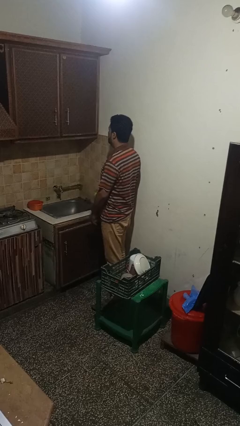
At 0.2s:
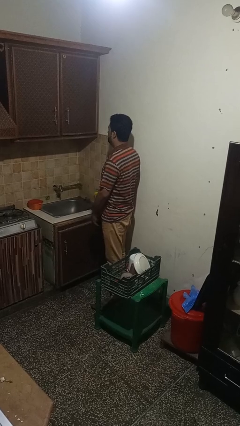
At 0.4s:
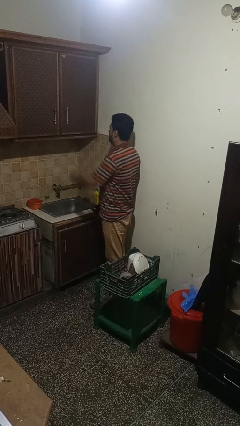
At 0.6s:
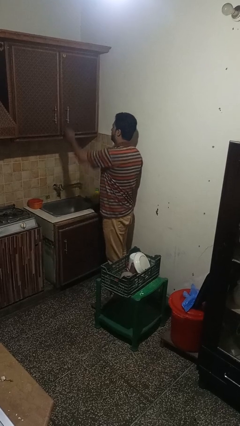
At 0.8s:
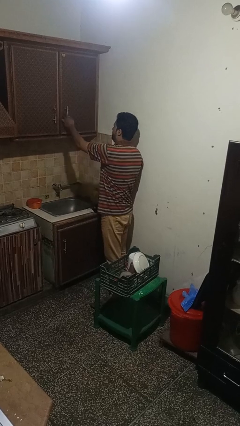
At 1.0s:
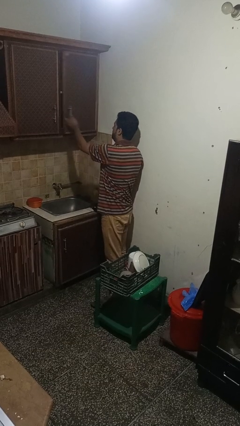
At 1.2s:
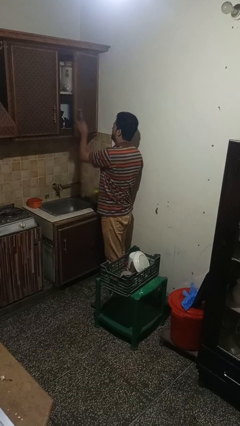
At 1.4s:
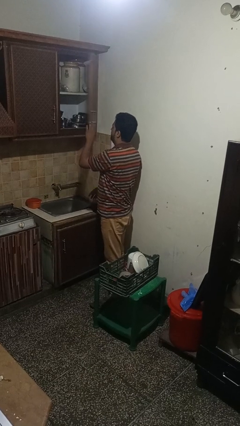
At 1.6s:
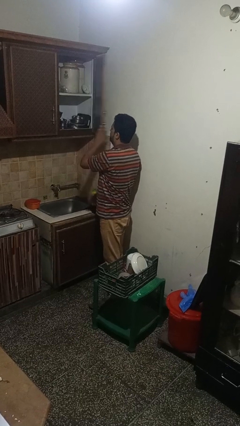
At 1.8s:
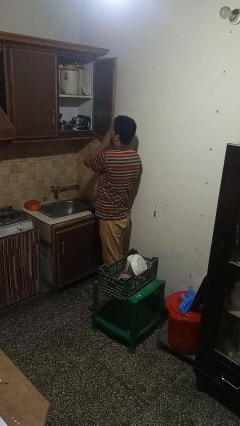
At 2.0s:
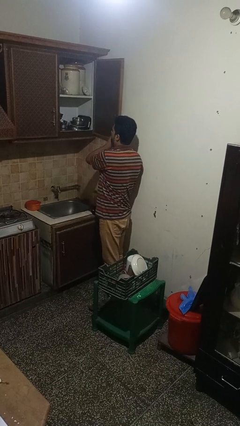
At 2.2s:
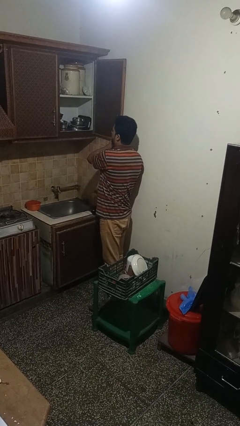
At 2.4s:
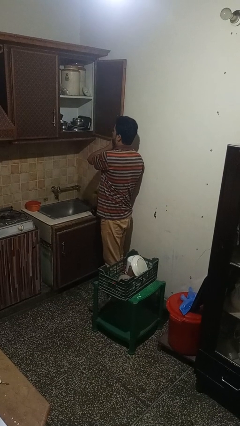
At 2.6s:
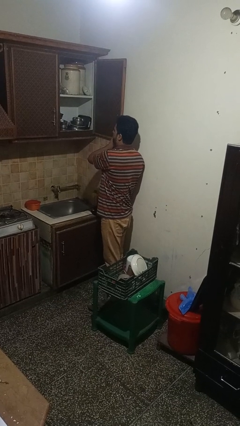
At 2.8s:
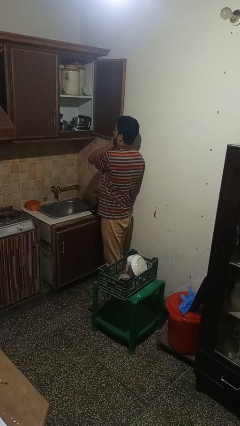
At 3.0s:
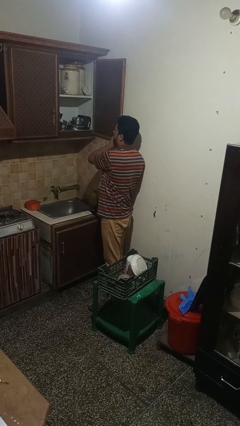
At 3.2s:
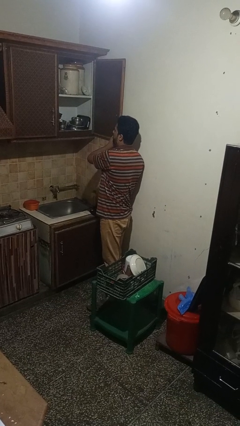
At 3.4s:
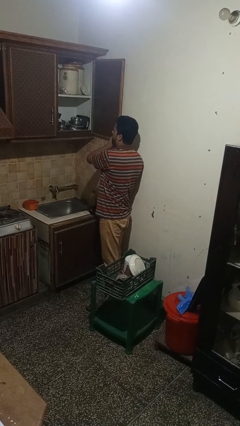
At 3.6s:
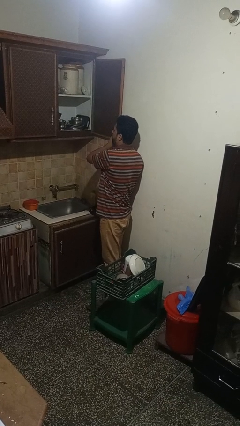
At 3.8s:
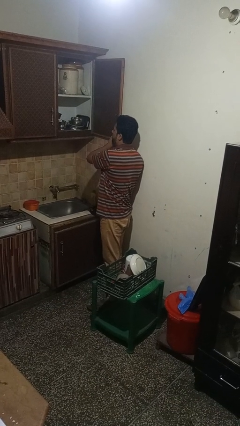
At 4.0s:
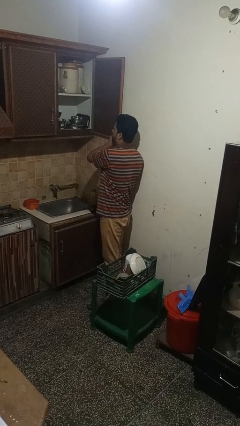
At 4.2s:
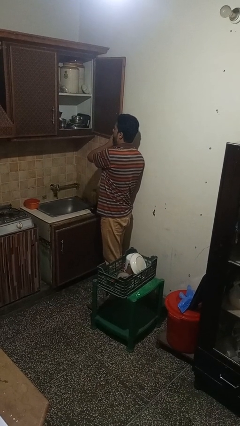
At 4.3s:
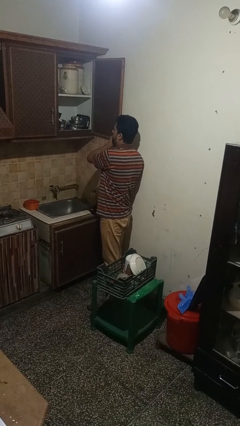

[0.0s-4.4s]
person opens cabinet

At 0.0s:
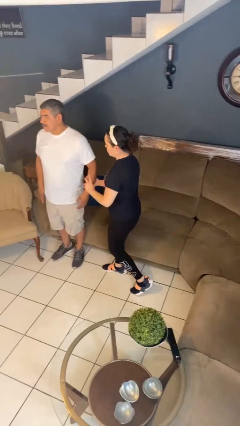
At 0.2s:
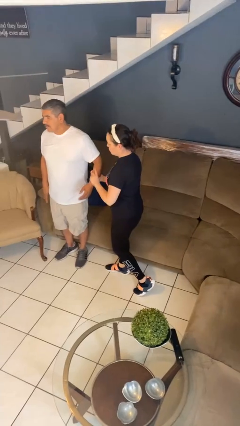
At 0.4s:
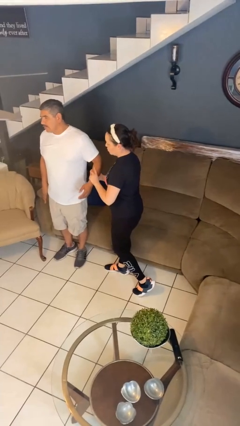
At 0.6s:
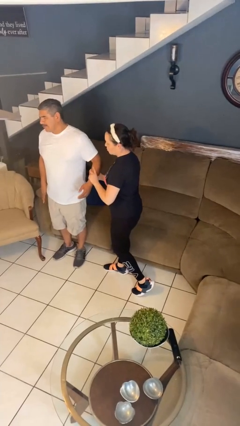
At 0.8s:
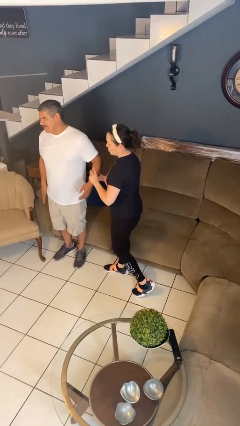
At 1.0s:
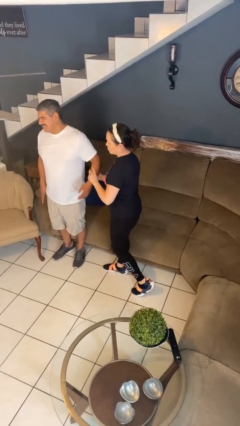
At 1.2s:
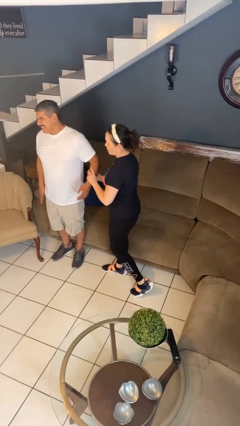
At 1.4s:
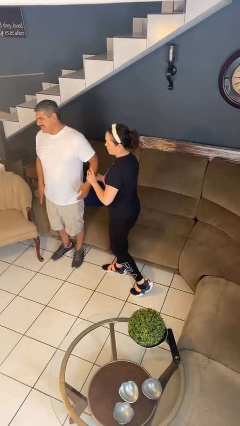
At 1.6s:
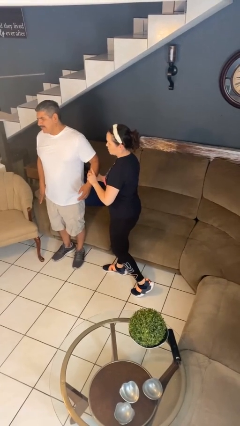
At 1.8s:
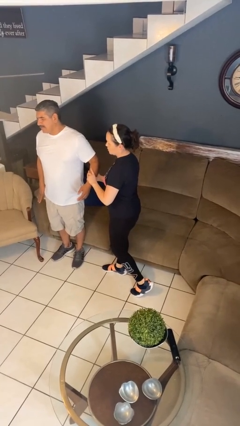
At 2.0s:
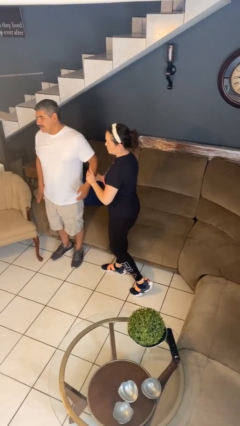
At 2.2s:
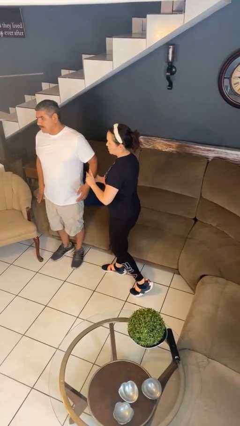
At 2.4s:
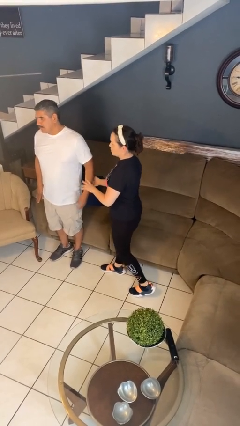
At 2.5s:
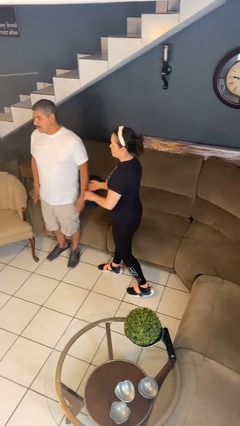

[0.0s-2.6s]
person grabs person by forearm

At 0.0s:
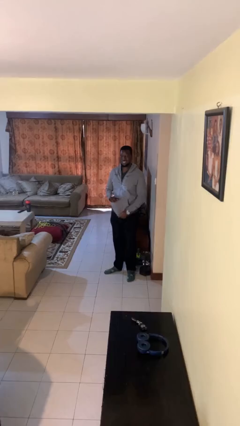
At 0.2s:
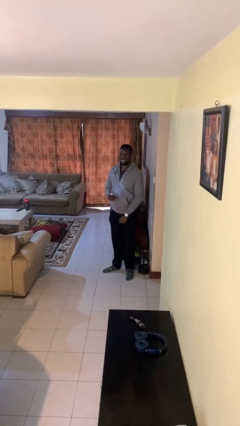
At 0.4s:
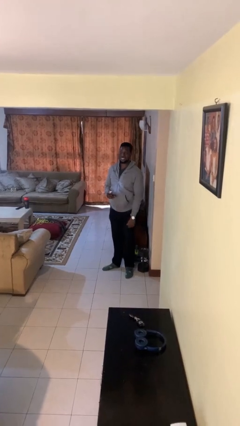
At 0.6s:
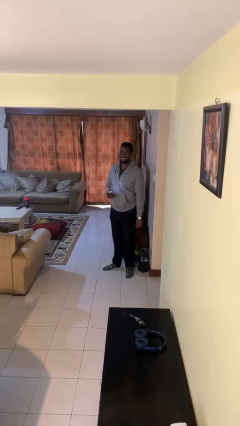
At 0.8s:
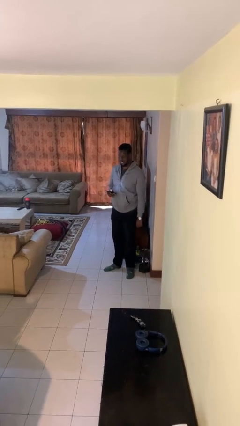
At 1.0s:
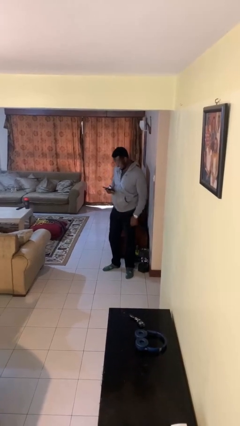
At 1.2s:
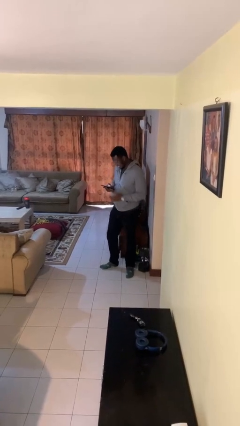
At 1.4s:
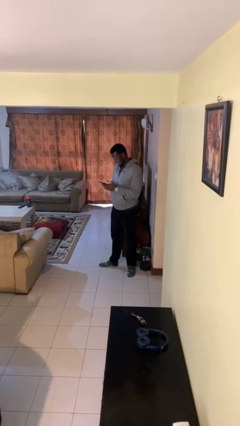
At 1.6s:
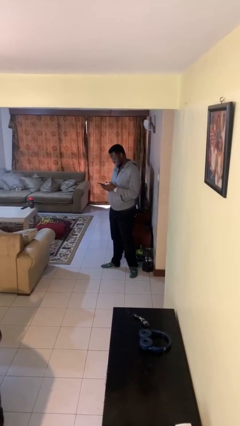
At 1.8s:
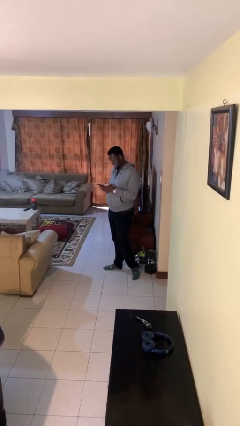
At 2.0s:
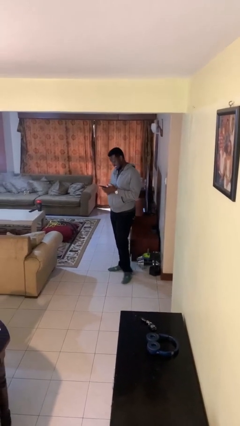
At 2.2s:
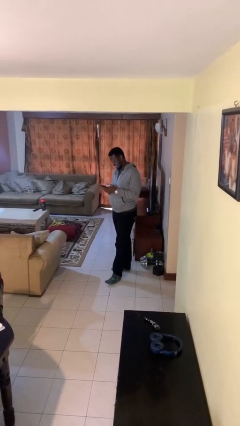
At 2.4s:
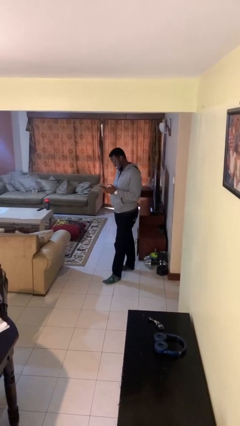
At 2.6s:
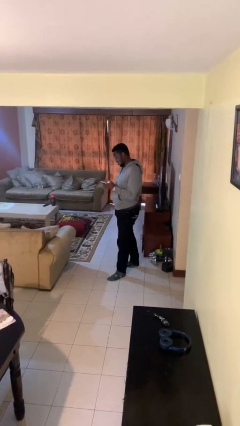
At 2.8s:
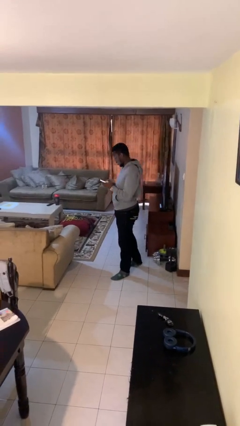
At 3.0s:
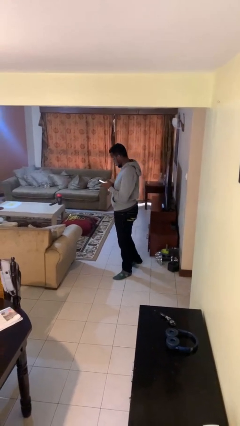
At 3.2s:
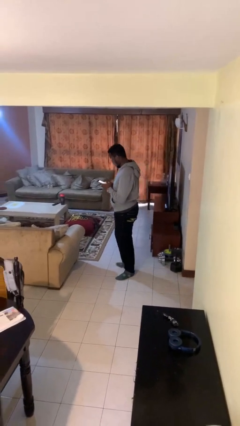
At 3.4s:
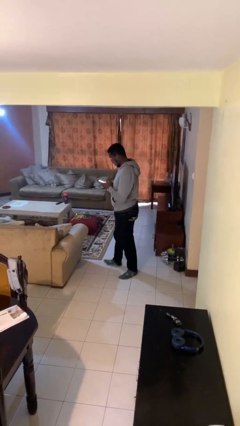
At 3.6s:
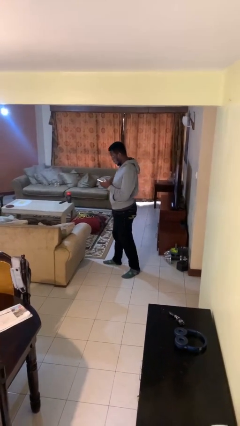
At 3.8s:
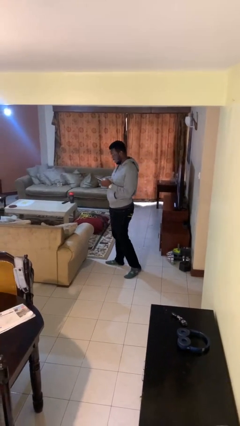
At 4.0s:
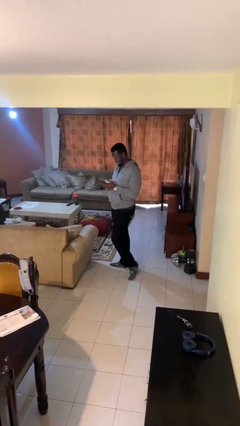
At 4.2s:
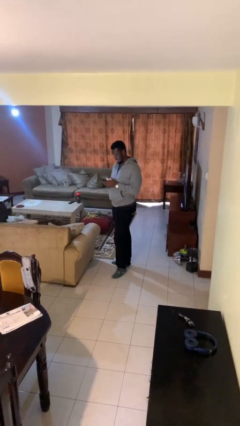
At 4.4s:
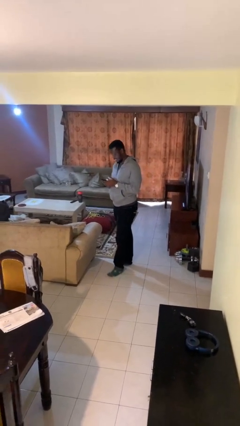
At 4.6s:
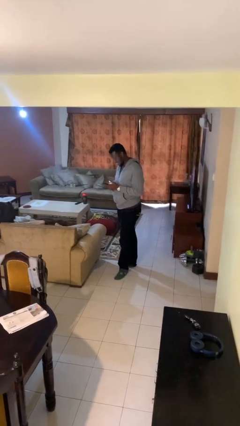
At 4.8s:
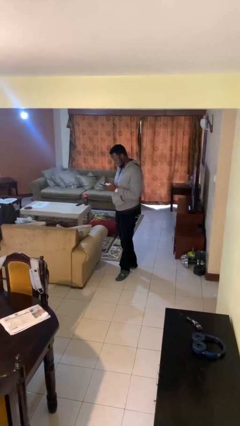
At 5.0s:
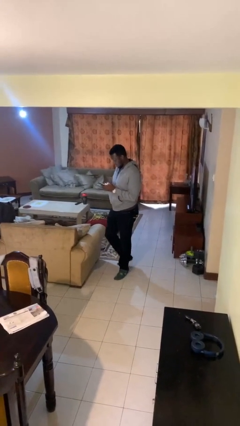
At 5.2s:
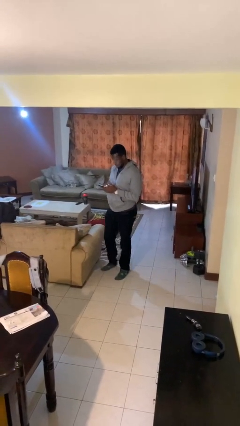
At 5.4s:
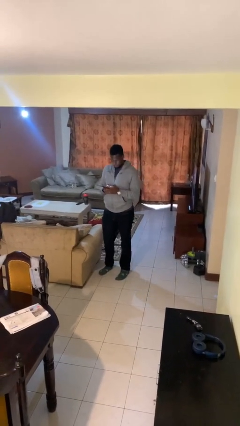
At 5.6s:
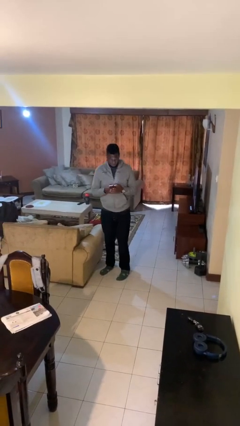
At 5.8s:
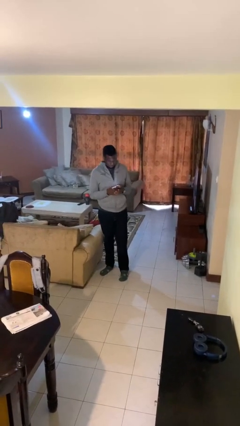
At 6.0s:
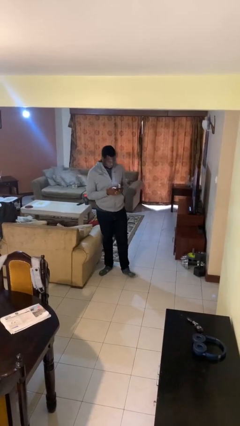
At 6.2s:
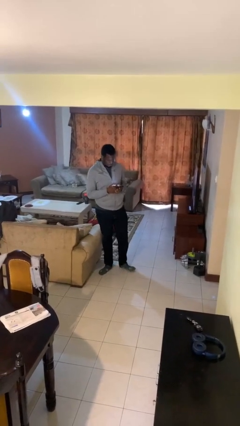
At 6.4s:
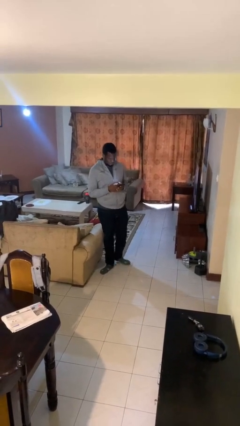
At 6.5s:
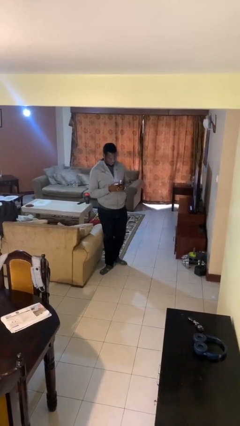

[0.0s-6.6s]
person texts on phone

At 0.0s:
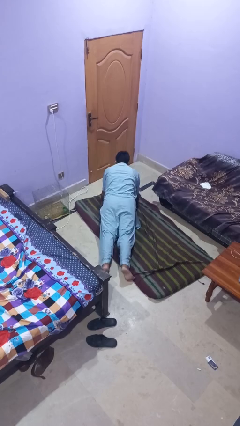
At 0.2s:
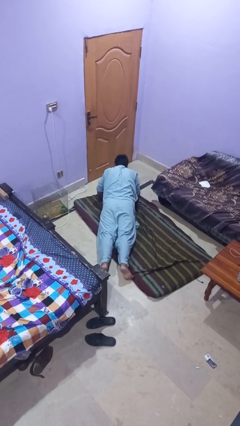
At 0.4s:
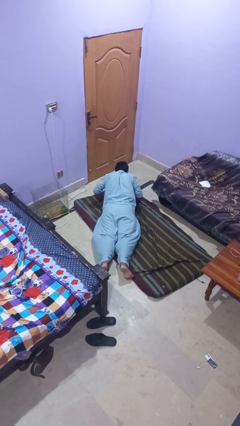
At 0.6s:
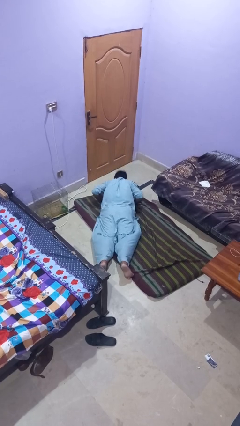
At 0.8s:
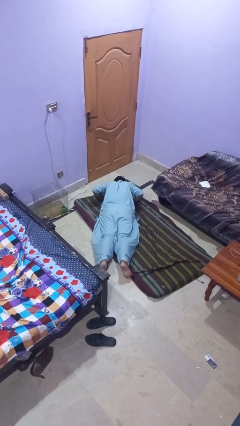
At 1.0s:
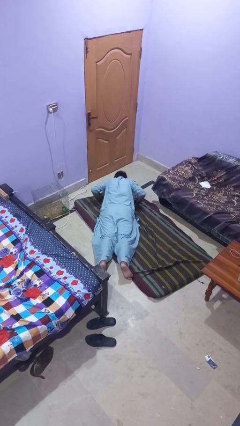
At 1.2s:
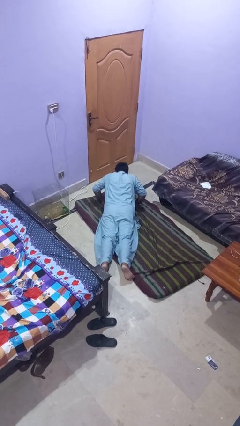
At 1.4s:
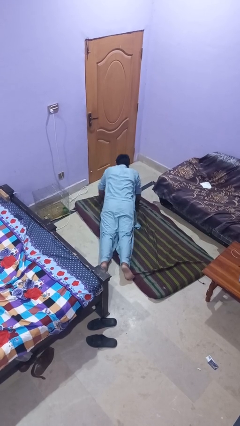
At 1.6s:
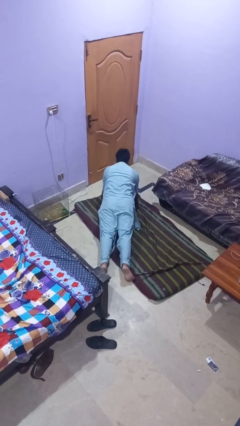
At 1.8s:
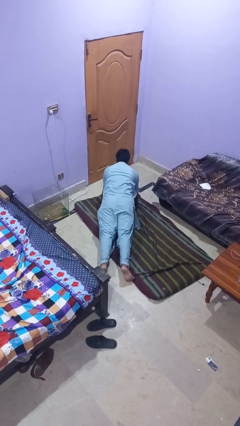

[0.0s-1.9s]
person exercises with pushup

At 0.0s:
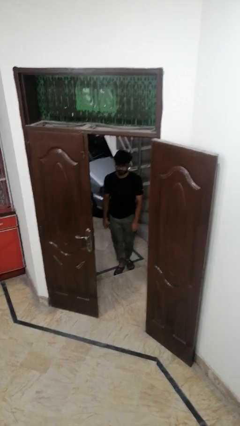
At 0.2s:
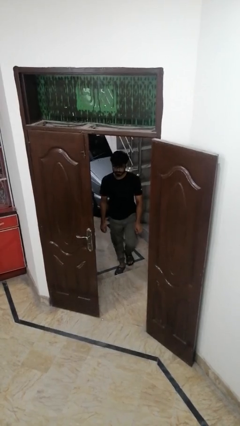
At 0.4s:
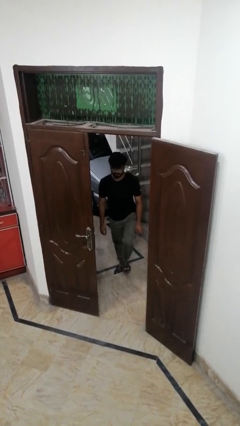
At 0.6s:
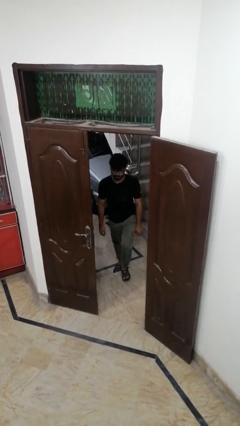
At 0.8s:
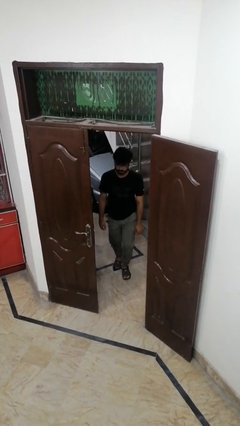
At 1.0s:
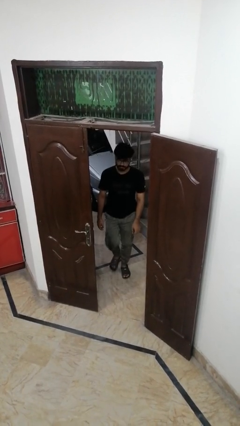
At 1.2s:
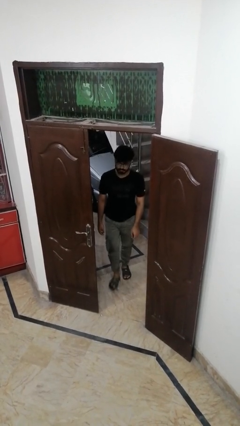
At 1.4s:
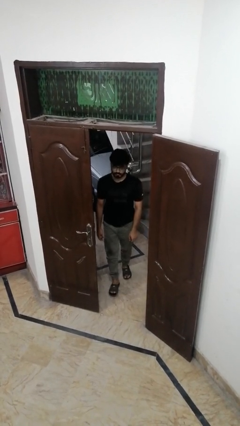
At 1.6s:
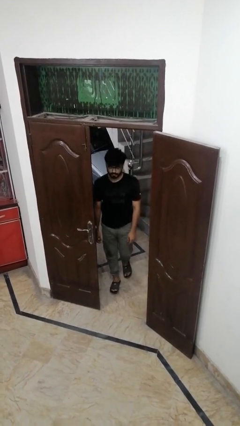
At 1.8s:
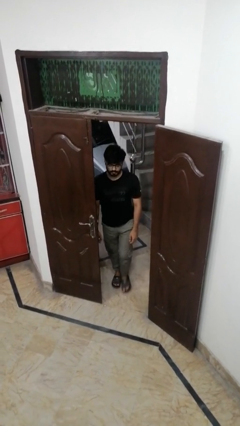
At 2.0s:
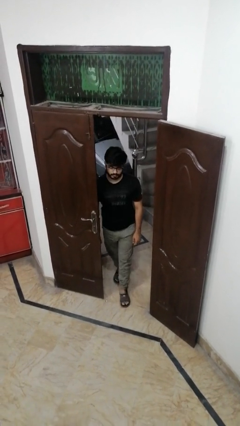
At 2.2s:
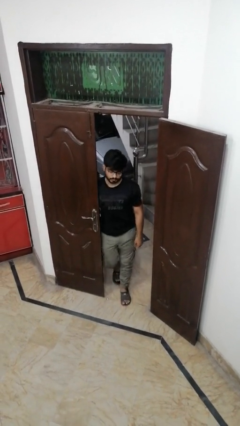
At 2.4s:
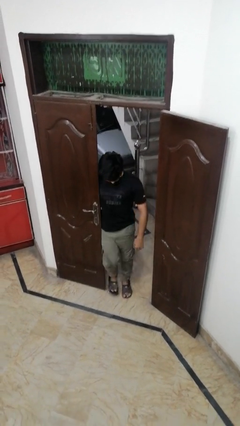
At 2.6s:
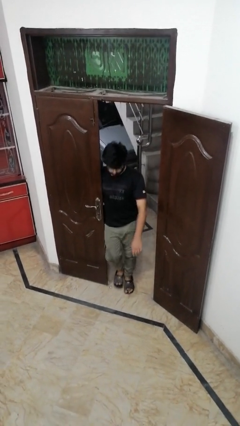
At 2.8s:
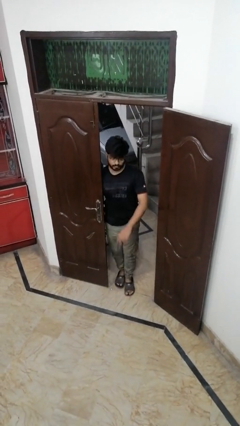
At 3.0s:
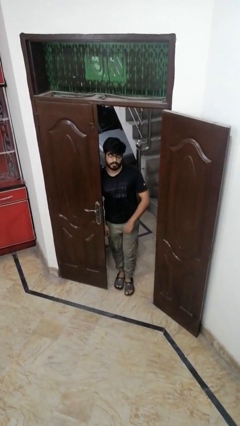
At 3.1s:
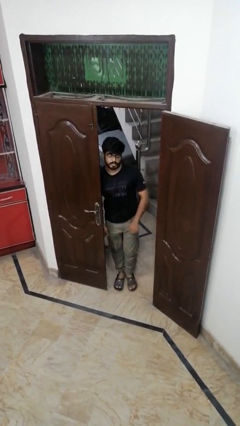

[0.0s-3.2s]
person bumps into wall
